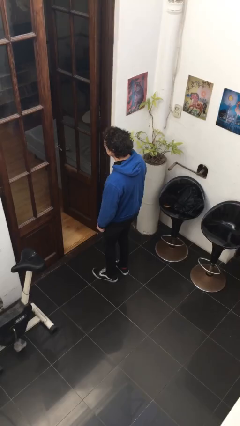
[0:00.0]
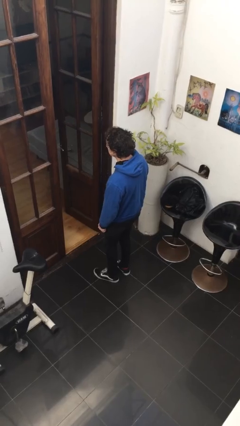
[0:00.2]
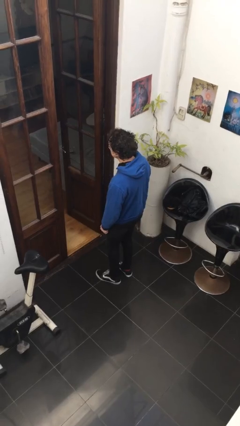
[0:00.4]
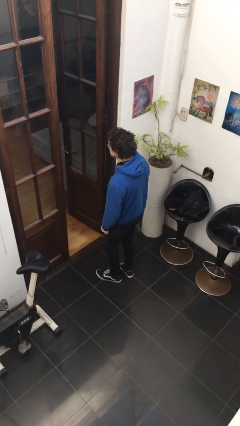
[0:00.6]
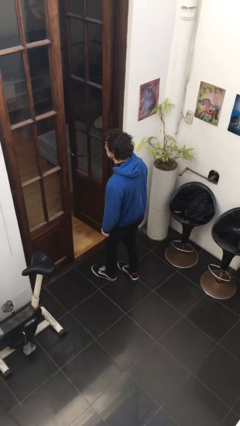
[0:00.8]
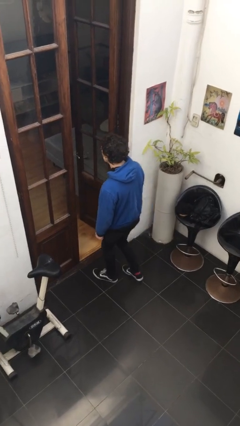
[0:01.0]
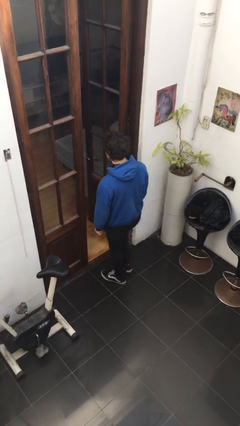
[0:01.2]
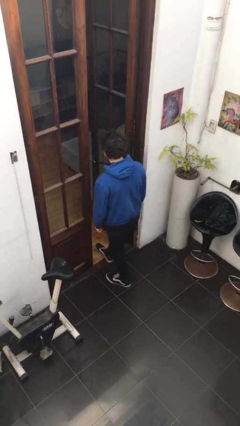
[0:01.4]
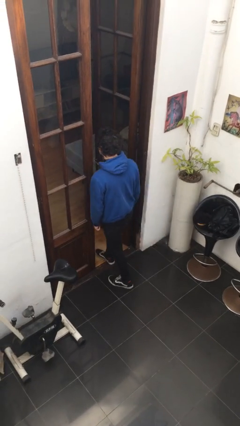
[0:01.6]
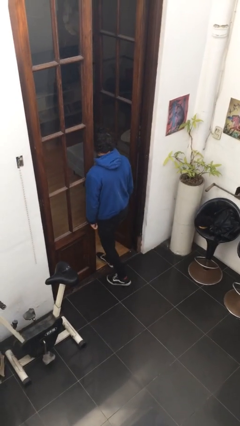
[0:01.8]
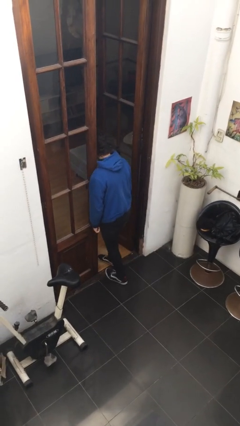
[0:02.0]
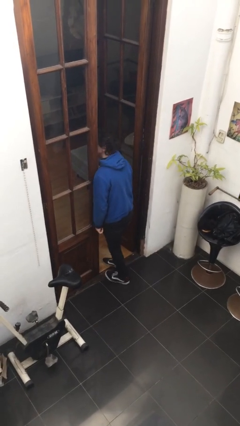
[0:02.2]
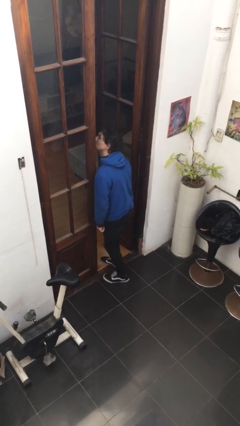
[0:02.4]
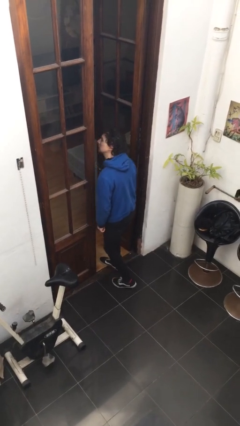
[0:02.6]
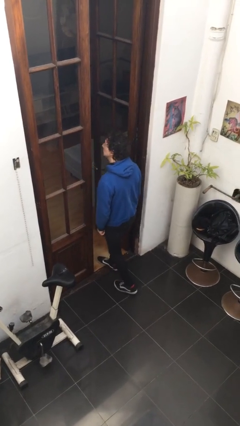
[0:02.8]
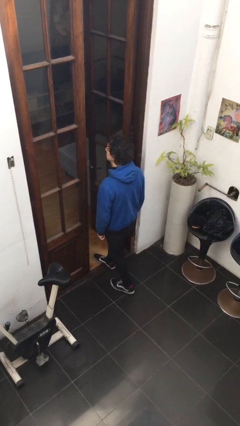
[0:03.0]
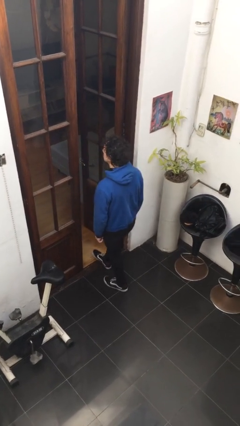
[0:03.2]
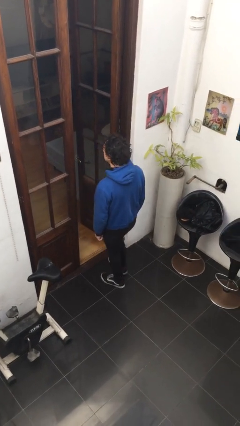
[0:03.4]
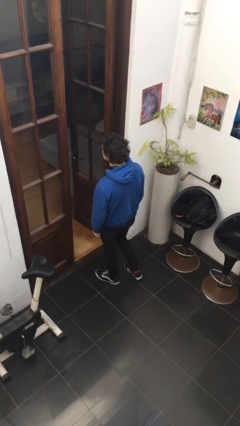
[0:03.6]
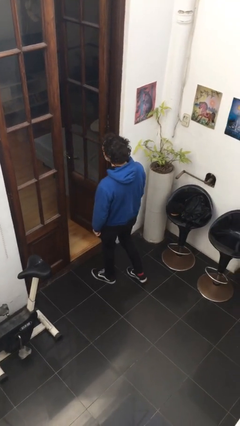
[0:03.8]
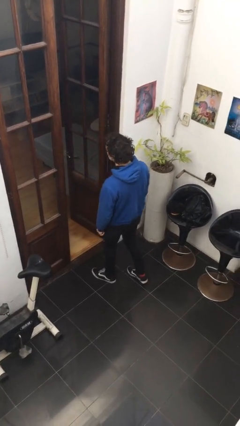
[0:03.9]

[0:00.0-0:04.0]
person bumps into wall

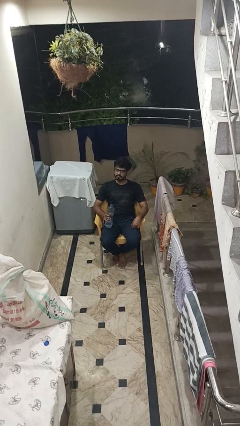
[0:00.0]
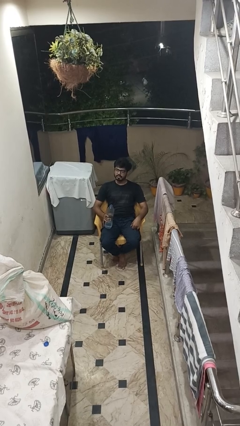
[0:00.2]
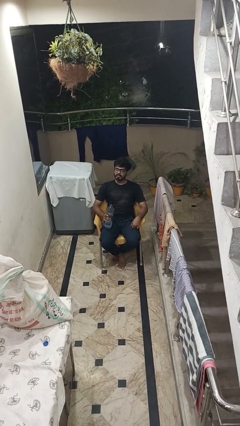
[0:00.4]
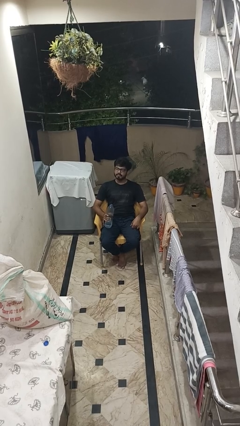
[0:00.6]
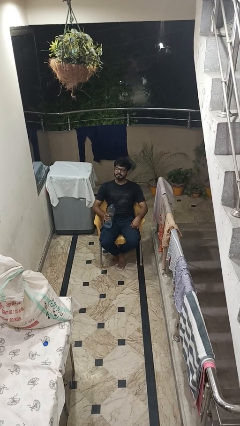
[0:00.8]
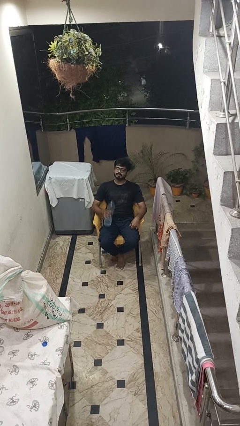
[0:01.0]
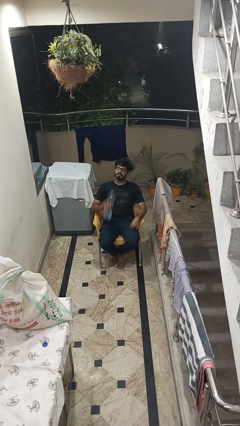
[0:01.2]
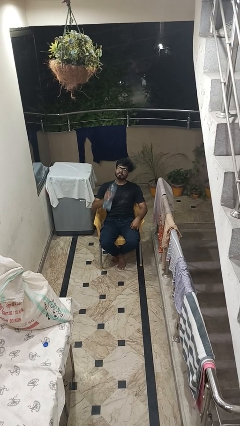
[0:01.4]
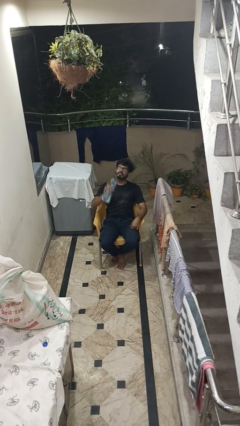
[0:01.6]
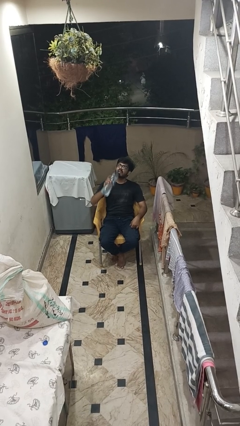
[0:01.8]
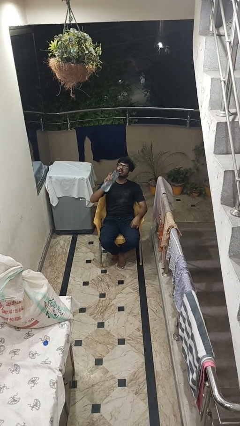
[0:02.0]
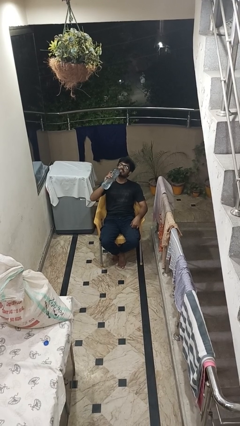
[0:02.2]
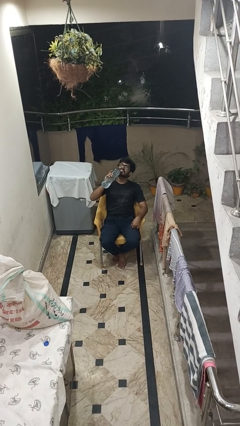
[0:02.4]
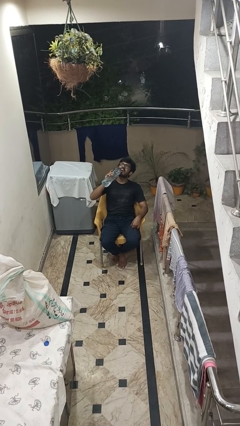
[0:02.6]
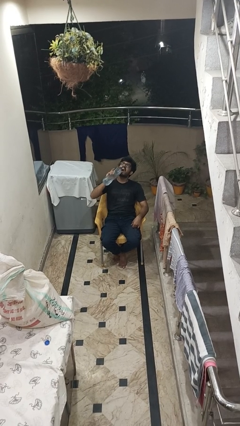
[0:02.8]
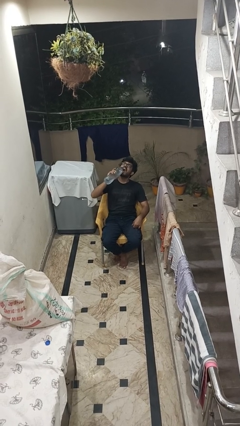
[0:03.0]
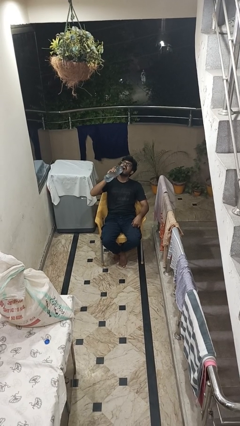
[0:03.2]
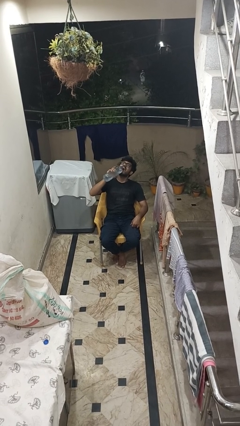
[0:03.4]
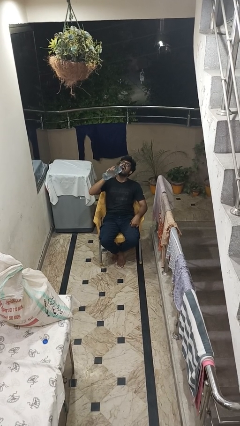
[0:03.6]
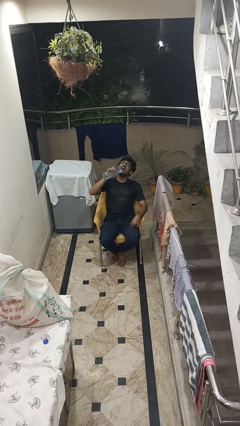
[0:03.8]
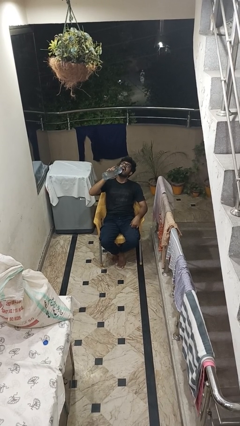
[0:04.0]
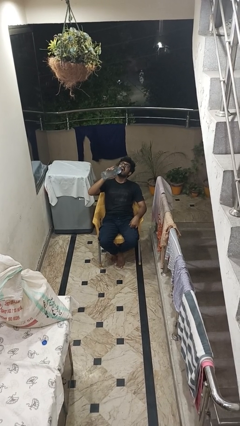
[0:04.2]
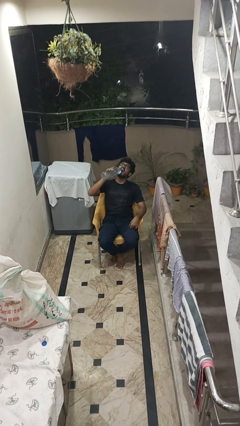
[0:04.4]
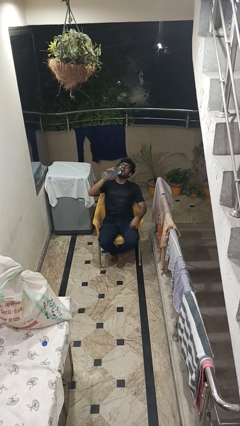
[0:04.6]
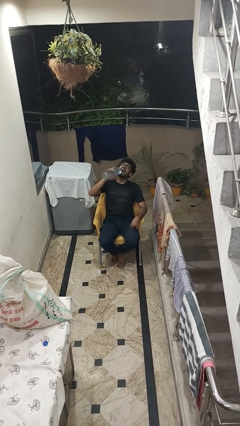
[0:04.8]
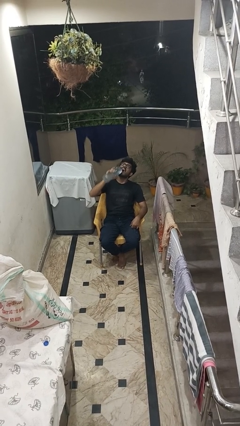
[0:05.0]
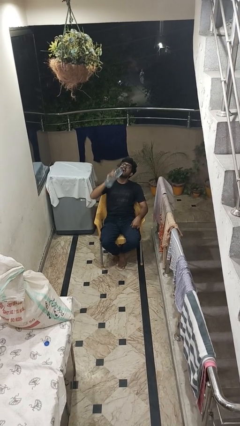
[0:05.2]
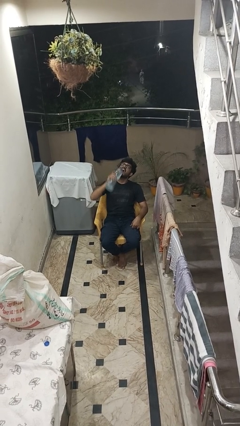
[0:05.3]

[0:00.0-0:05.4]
person drinks from bottle

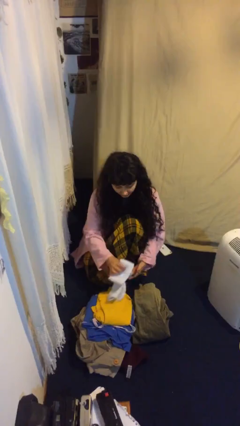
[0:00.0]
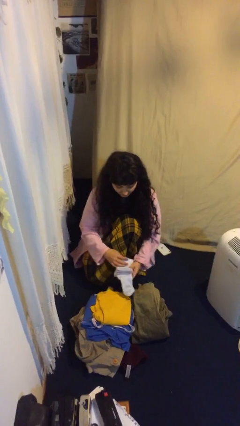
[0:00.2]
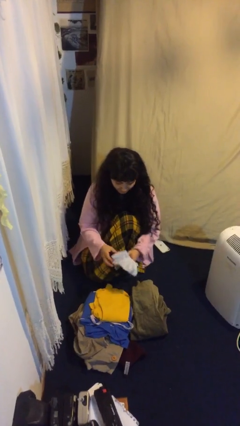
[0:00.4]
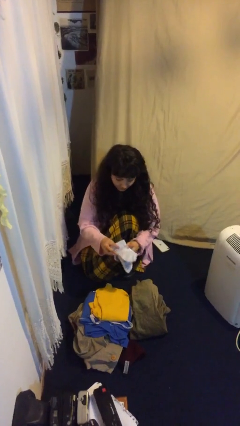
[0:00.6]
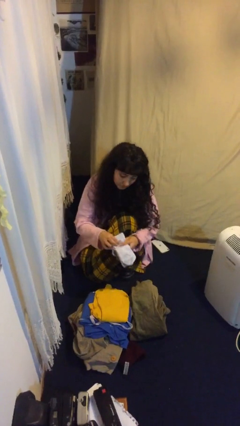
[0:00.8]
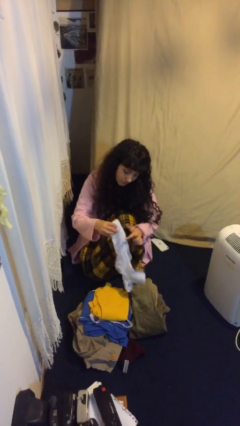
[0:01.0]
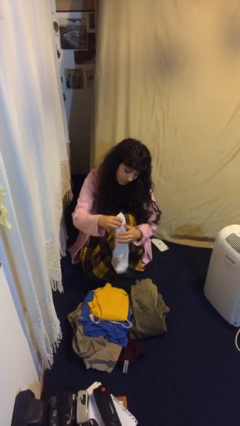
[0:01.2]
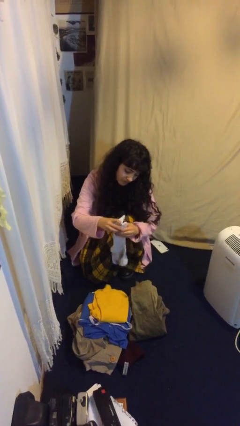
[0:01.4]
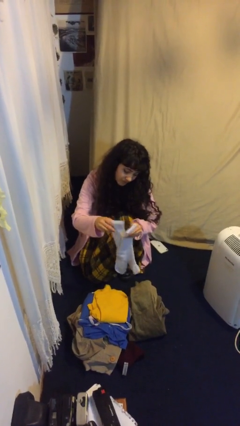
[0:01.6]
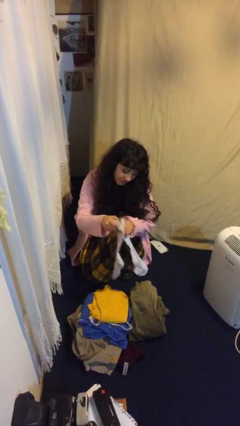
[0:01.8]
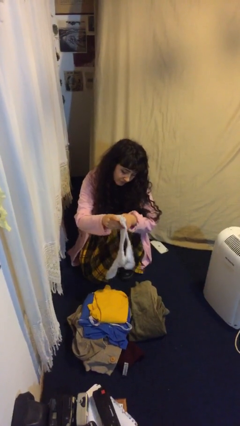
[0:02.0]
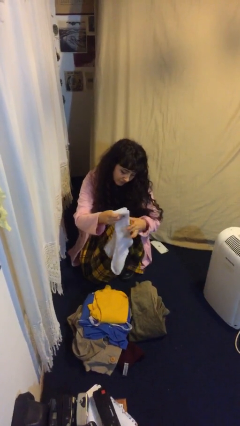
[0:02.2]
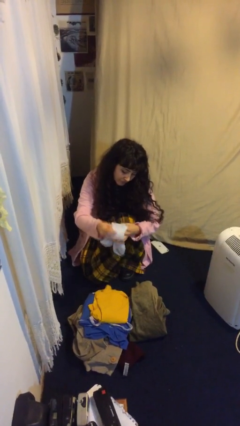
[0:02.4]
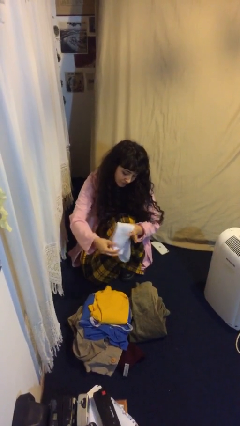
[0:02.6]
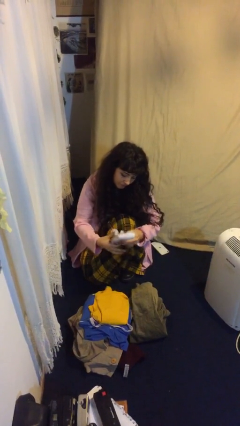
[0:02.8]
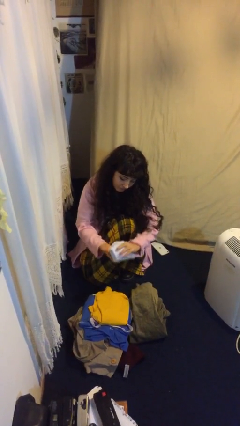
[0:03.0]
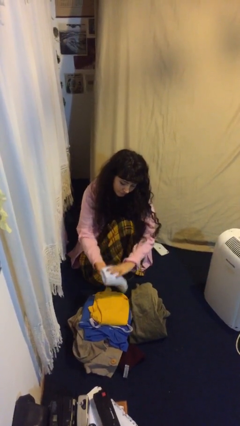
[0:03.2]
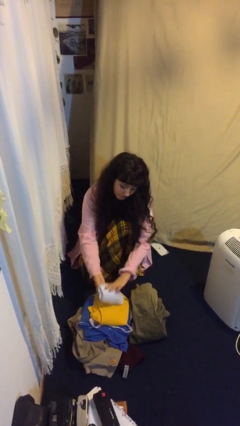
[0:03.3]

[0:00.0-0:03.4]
person folds socks

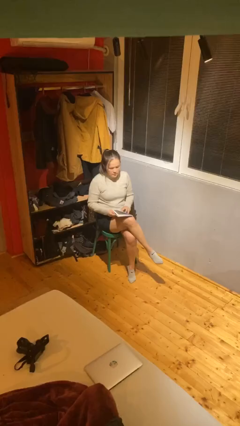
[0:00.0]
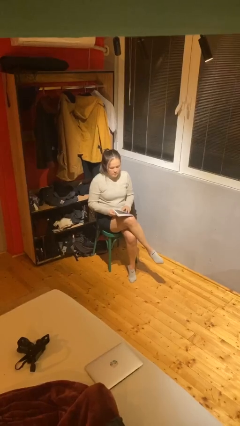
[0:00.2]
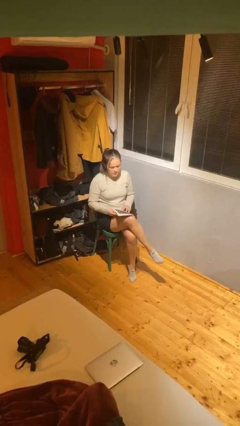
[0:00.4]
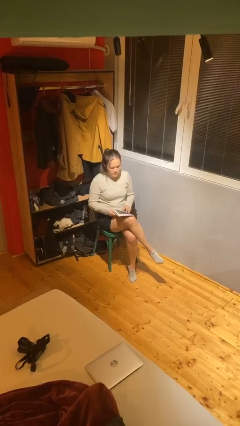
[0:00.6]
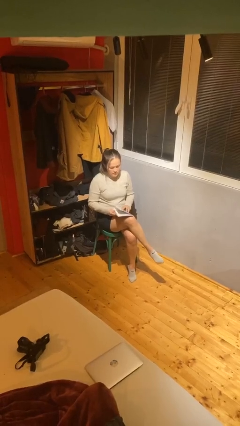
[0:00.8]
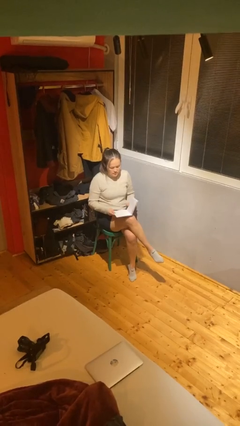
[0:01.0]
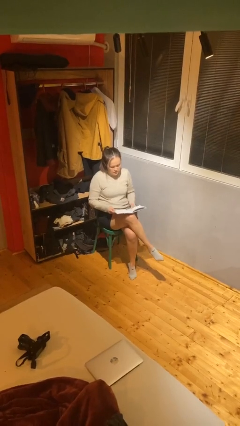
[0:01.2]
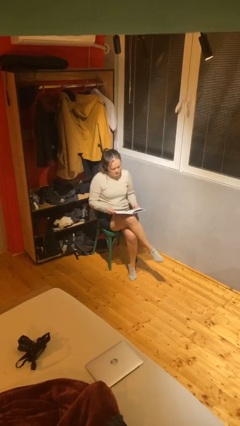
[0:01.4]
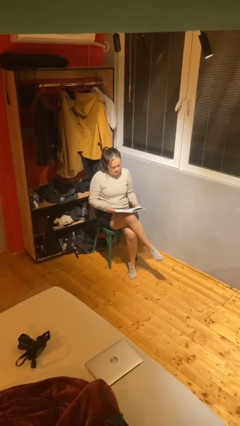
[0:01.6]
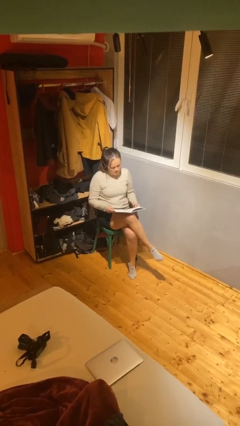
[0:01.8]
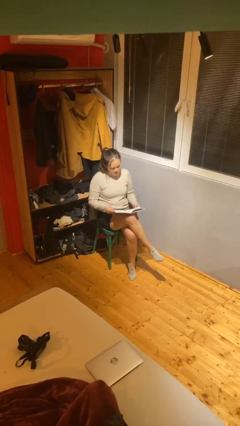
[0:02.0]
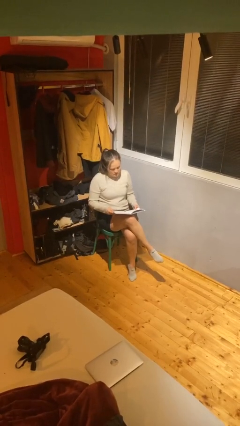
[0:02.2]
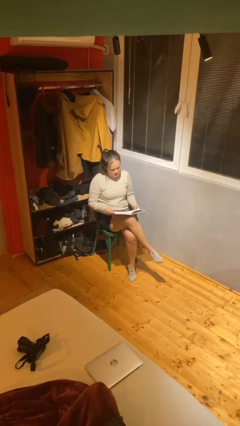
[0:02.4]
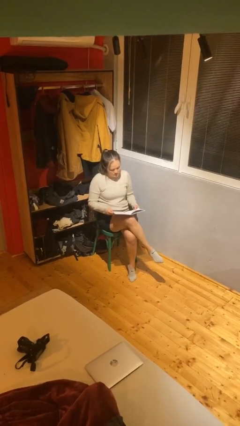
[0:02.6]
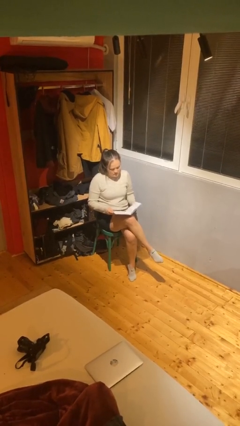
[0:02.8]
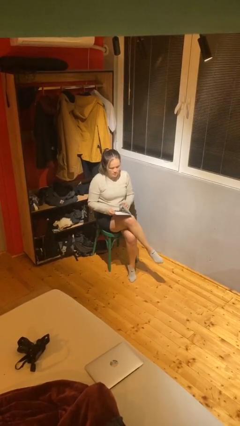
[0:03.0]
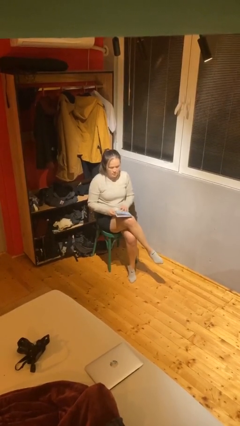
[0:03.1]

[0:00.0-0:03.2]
person reads document

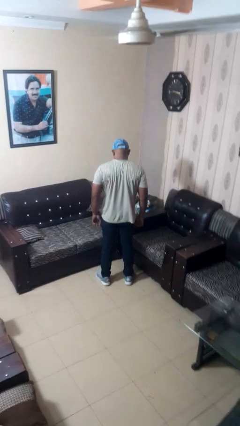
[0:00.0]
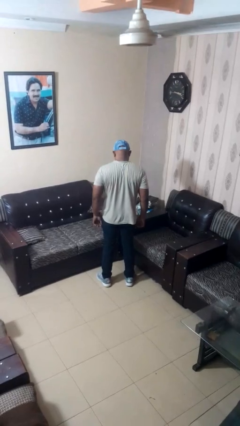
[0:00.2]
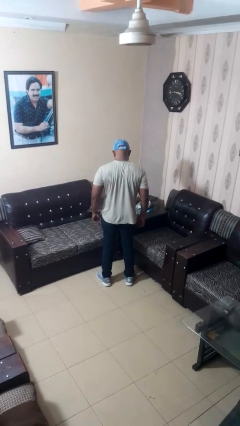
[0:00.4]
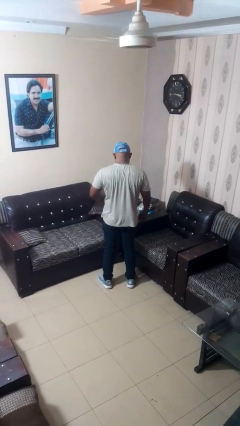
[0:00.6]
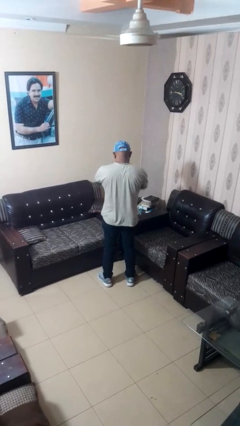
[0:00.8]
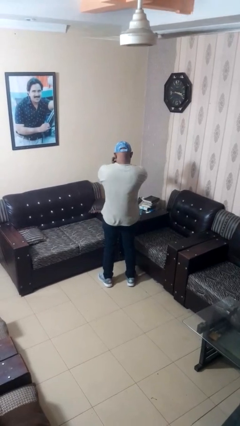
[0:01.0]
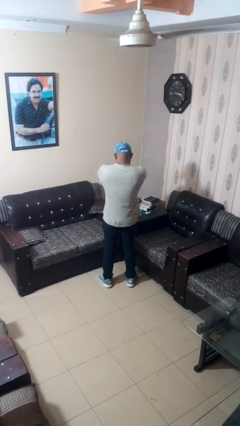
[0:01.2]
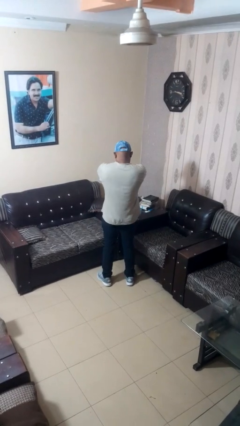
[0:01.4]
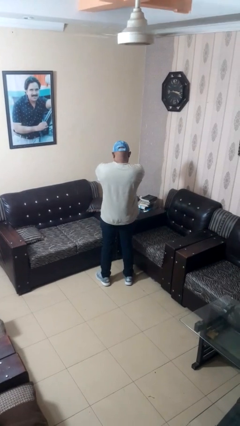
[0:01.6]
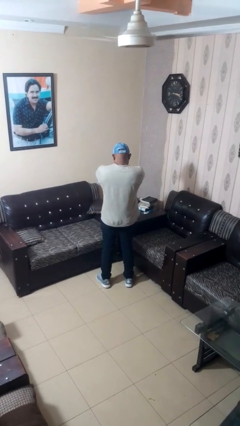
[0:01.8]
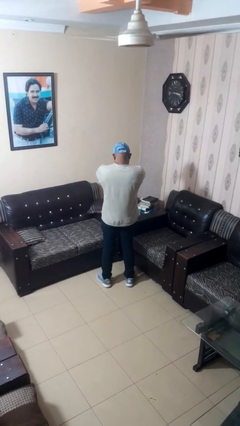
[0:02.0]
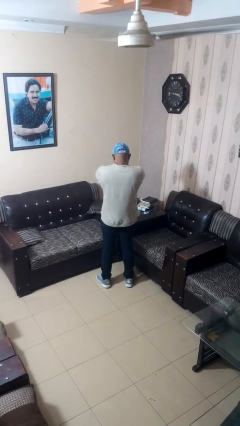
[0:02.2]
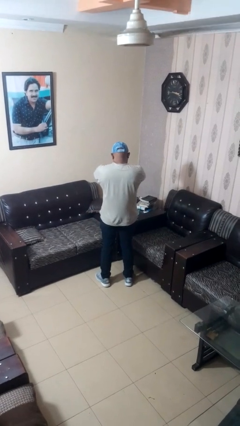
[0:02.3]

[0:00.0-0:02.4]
person crosses arms
